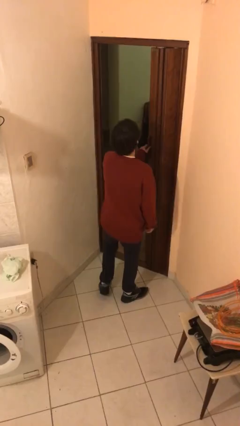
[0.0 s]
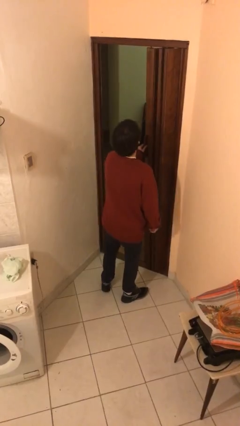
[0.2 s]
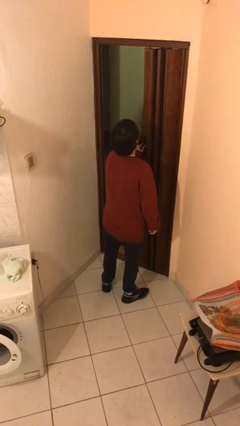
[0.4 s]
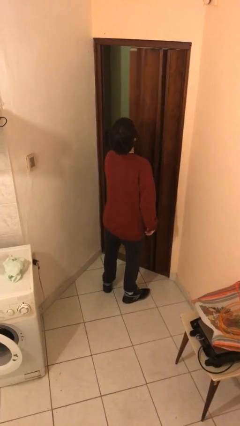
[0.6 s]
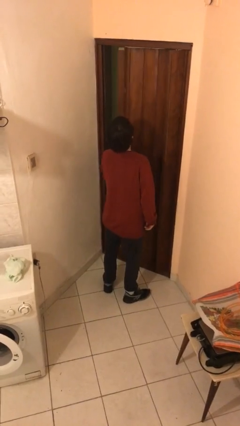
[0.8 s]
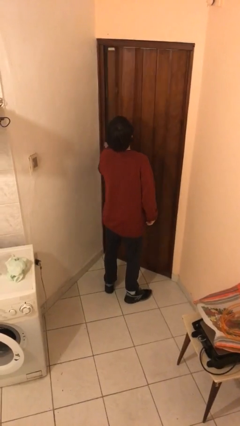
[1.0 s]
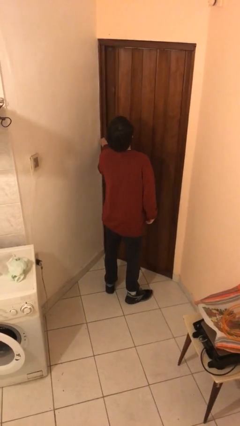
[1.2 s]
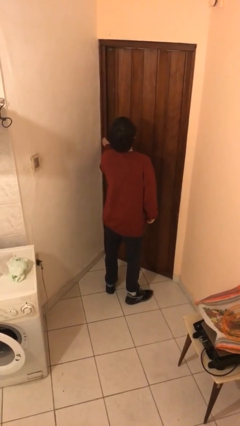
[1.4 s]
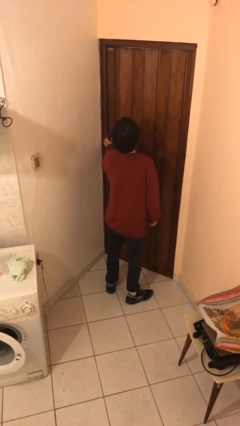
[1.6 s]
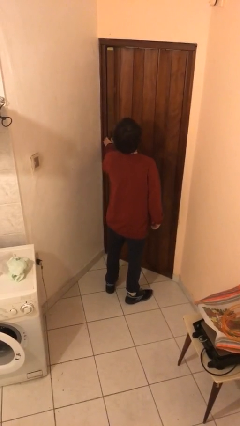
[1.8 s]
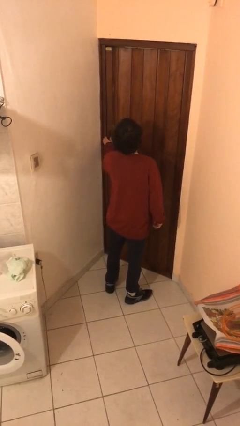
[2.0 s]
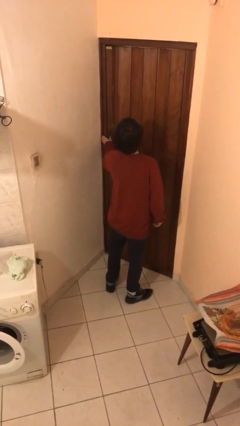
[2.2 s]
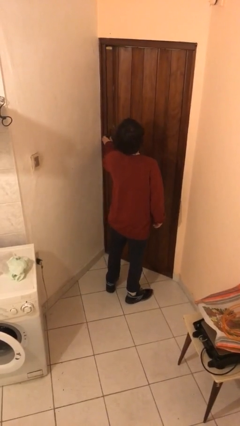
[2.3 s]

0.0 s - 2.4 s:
person closes sliding door

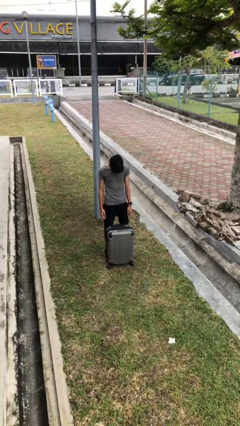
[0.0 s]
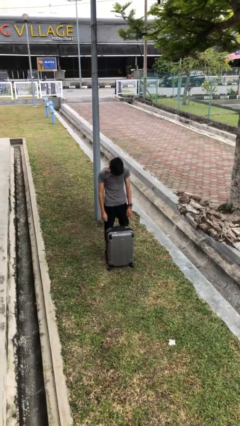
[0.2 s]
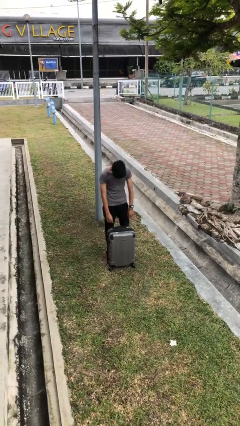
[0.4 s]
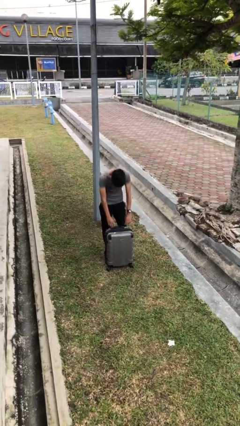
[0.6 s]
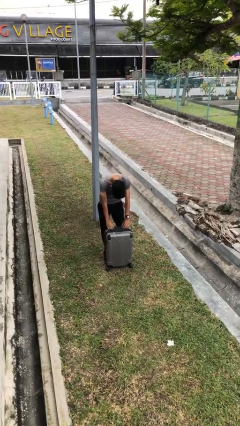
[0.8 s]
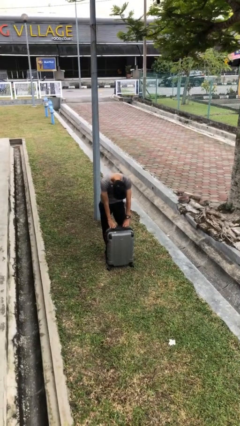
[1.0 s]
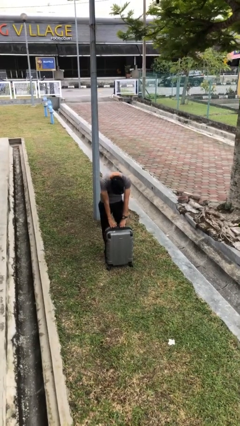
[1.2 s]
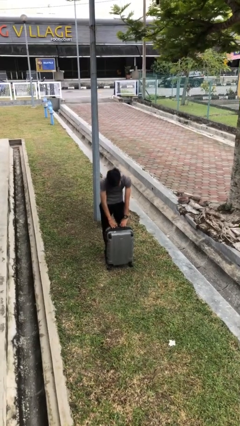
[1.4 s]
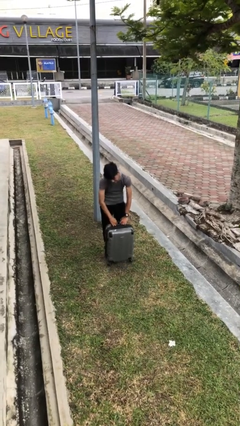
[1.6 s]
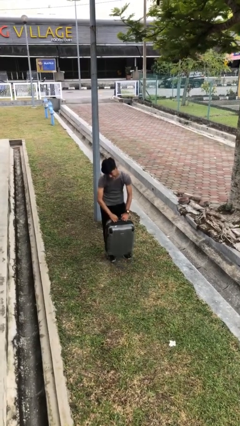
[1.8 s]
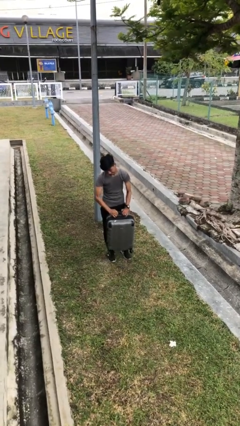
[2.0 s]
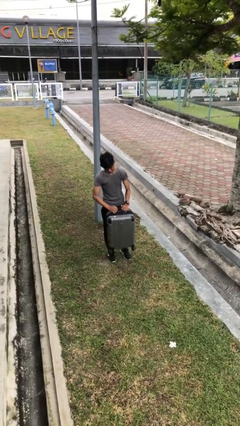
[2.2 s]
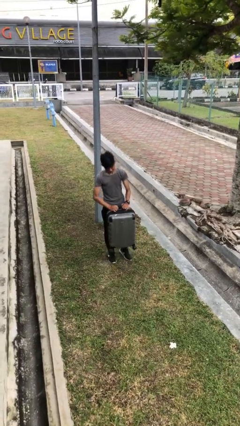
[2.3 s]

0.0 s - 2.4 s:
person picks up object from floor

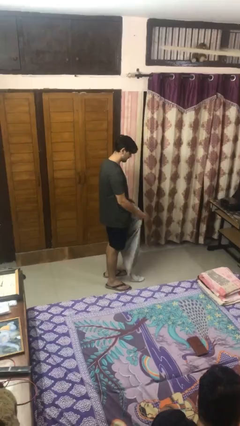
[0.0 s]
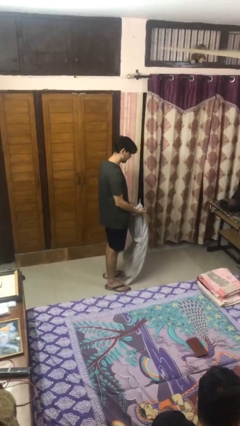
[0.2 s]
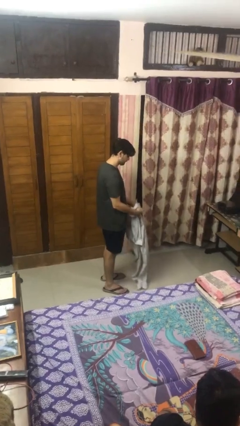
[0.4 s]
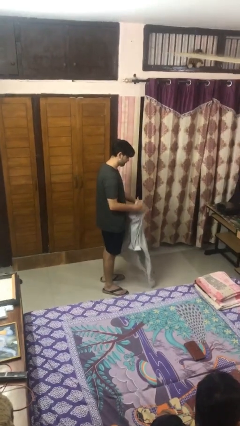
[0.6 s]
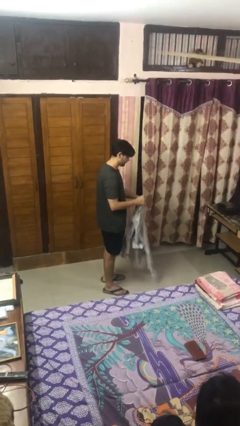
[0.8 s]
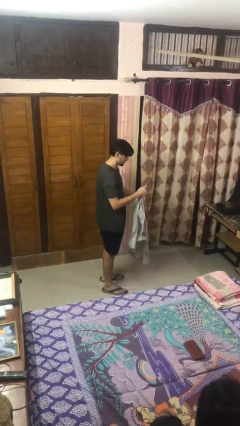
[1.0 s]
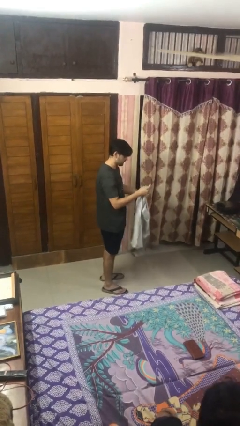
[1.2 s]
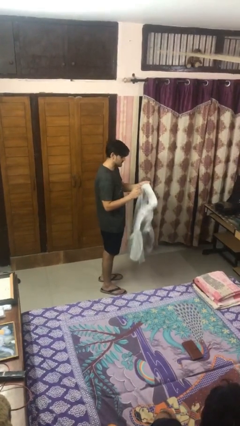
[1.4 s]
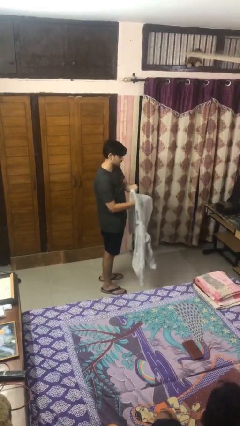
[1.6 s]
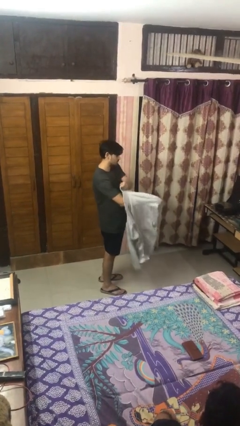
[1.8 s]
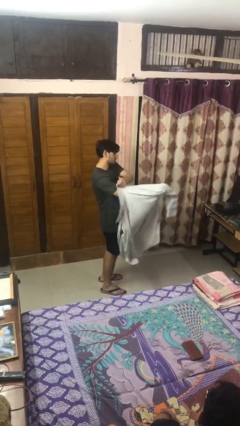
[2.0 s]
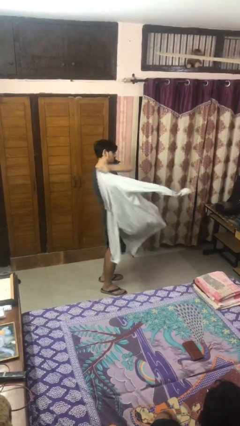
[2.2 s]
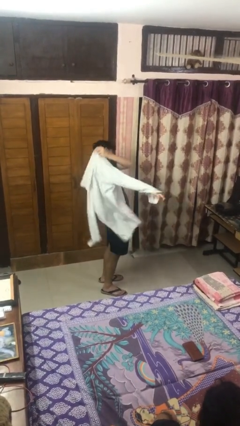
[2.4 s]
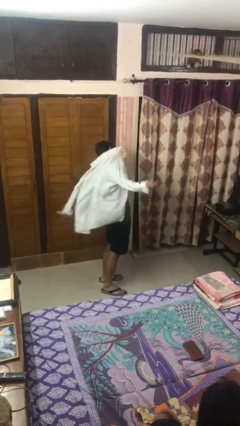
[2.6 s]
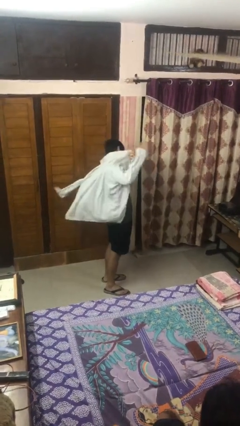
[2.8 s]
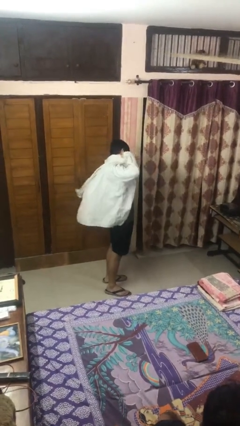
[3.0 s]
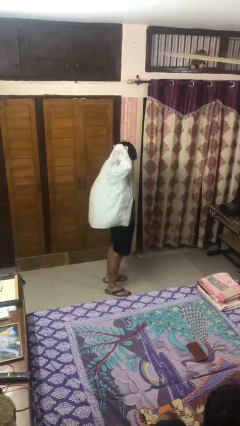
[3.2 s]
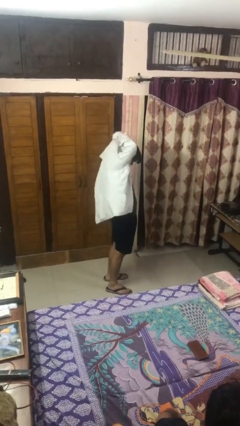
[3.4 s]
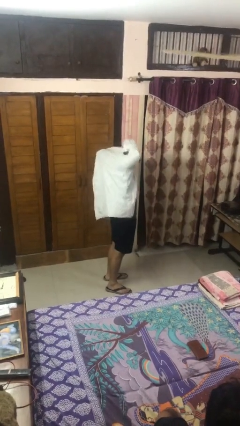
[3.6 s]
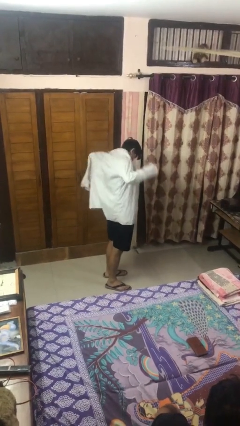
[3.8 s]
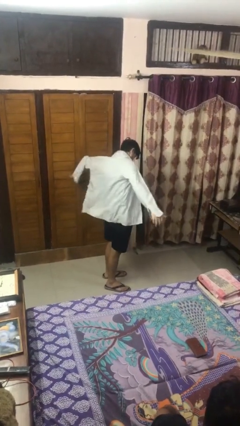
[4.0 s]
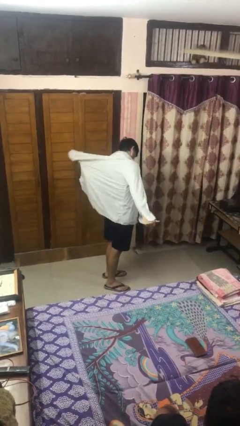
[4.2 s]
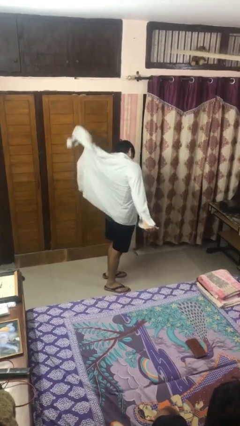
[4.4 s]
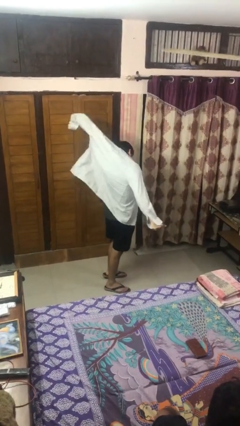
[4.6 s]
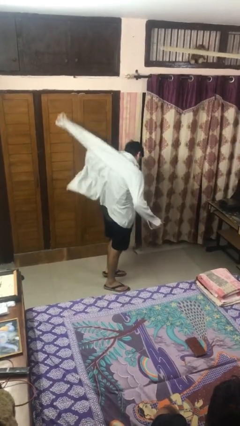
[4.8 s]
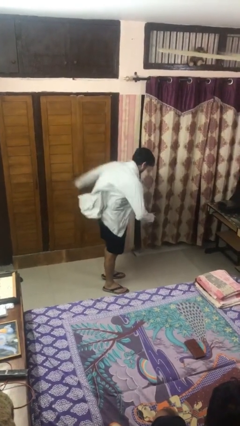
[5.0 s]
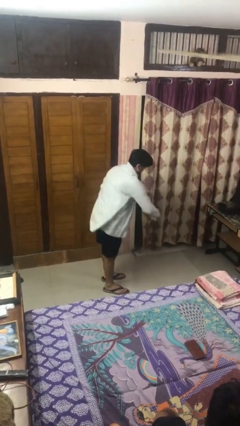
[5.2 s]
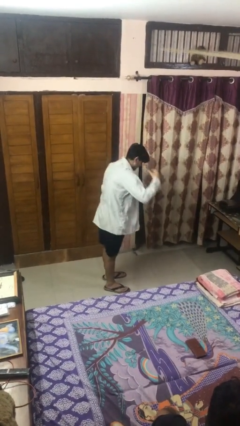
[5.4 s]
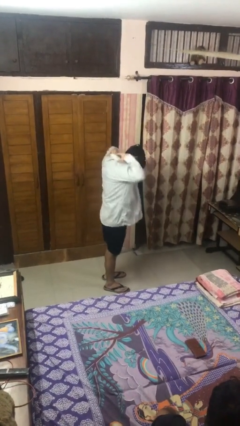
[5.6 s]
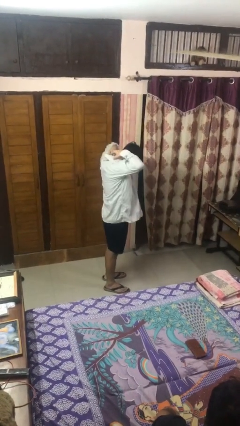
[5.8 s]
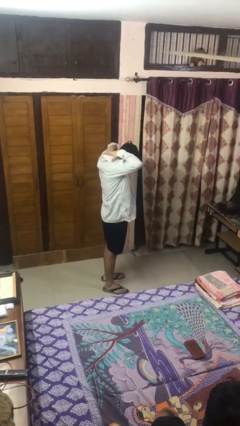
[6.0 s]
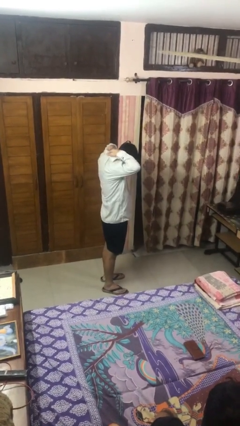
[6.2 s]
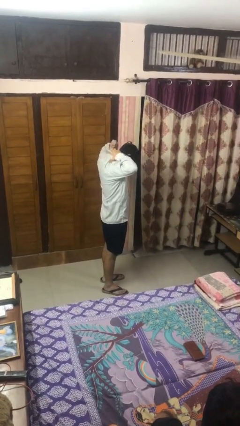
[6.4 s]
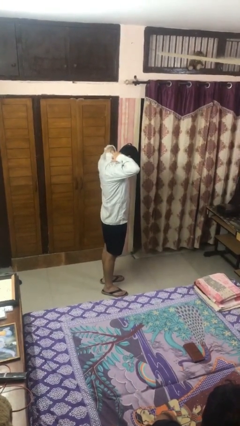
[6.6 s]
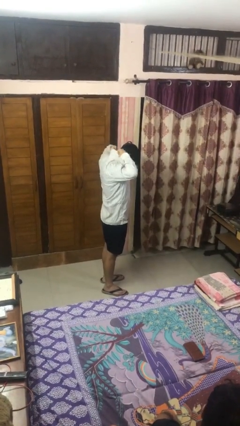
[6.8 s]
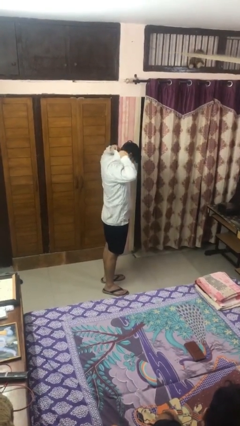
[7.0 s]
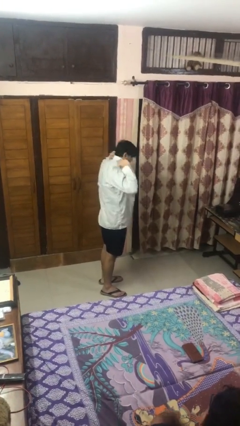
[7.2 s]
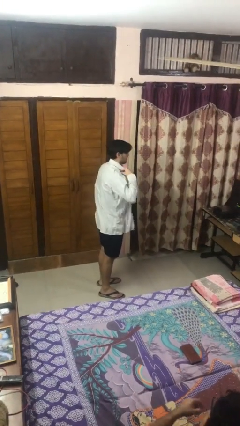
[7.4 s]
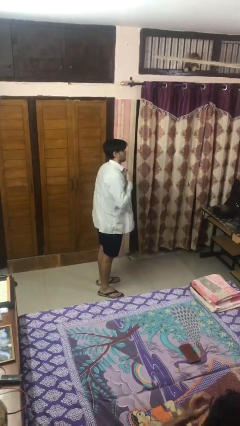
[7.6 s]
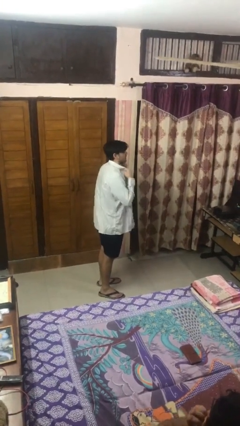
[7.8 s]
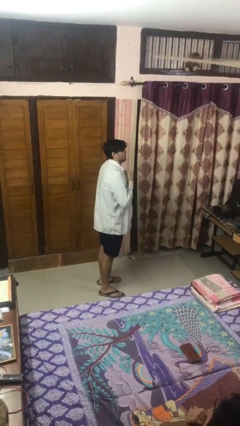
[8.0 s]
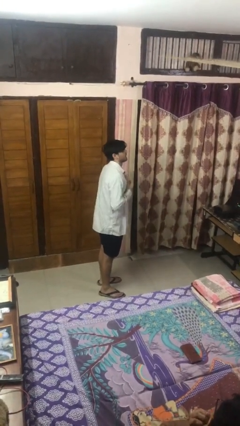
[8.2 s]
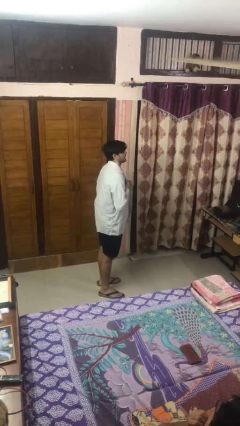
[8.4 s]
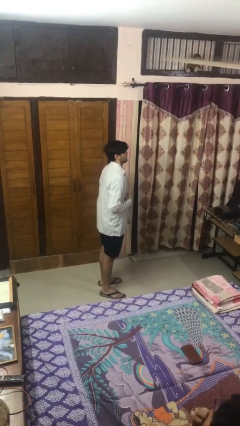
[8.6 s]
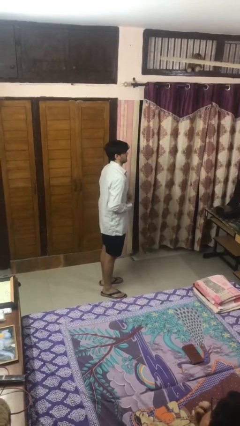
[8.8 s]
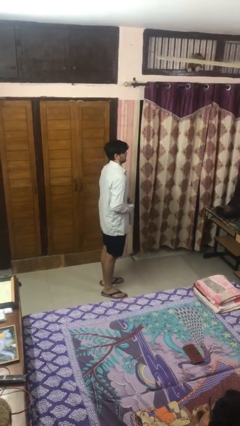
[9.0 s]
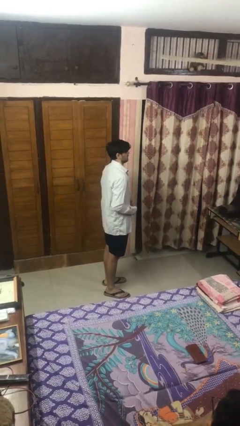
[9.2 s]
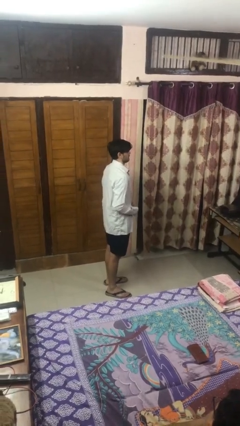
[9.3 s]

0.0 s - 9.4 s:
person puts on shirt

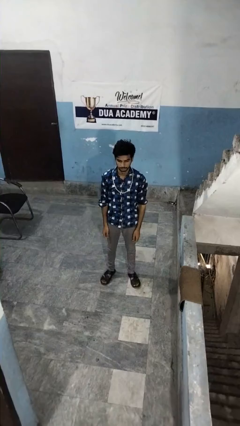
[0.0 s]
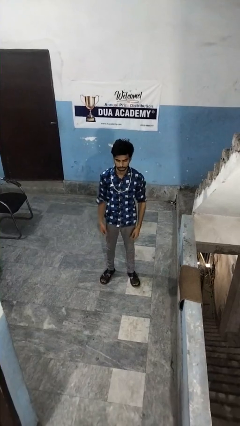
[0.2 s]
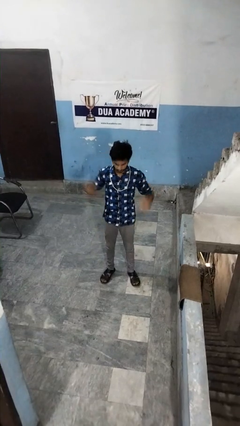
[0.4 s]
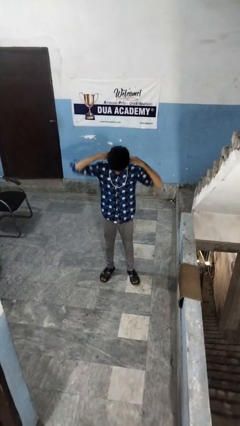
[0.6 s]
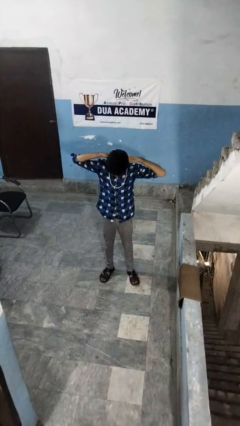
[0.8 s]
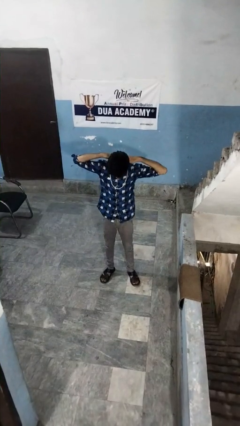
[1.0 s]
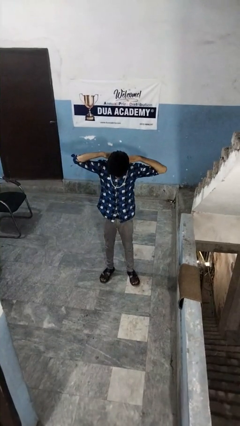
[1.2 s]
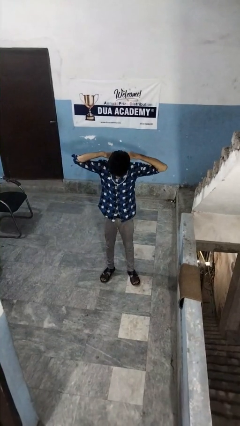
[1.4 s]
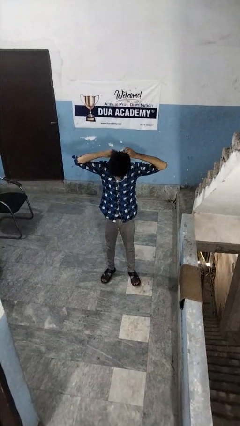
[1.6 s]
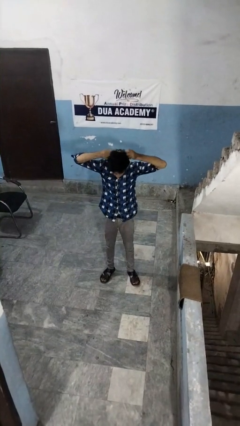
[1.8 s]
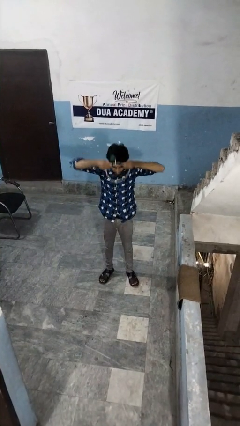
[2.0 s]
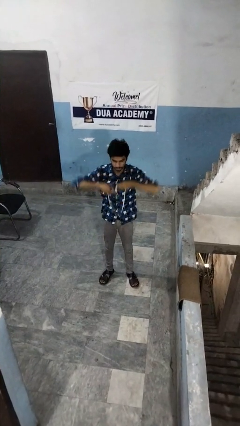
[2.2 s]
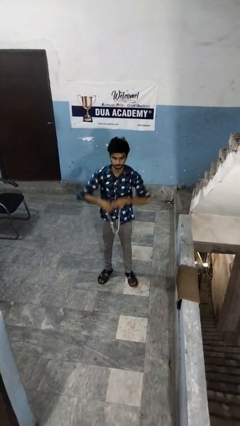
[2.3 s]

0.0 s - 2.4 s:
person takes off necklace

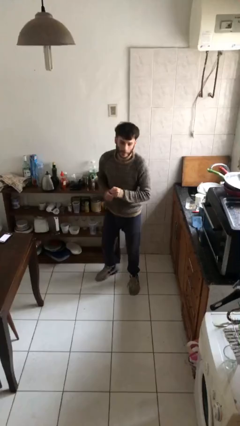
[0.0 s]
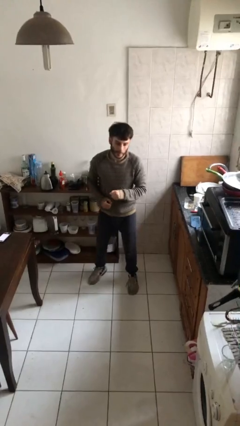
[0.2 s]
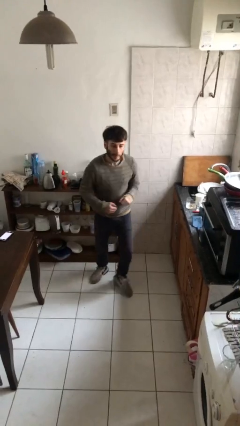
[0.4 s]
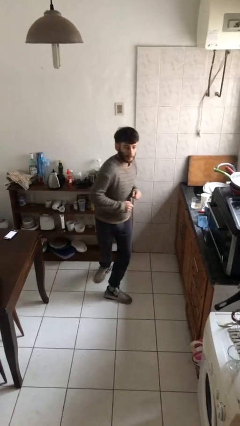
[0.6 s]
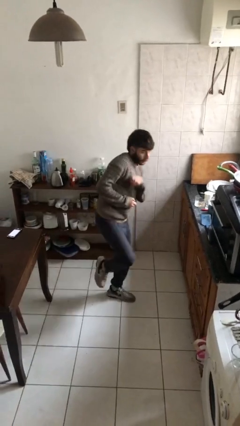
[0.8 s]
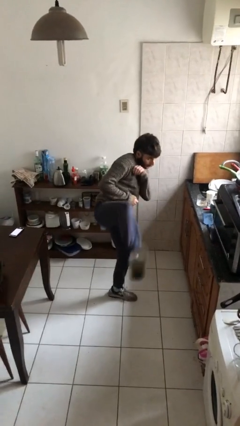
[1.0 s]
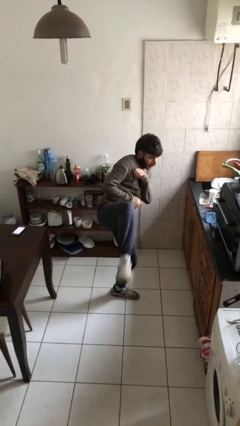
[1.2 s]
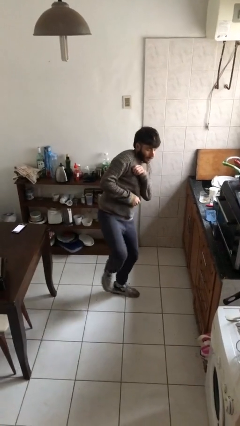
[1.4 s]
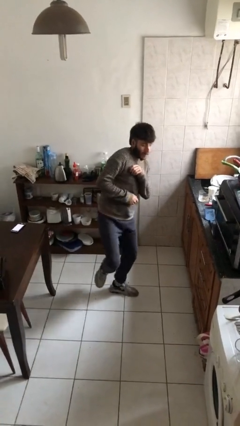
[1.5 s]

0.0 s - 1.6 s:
person karate kicks
